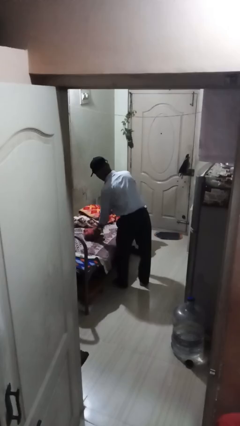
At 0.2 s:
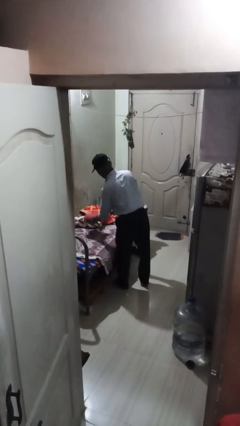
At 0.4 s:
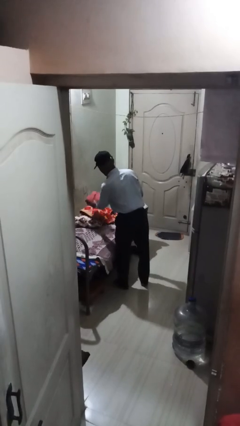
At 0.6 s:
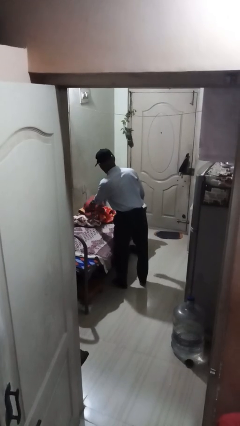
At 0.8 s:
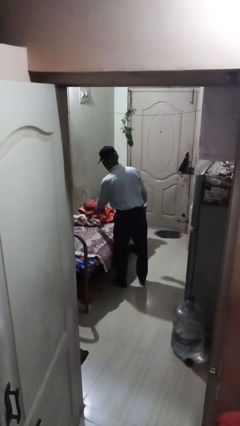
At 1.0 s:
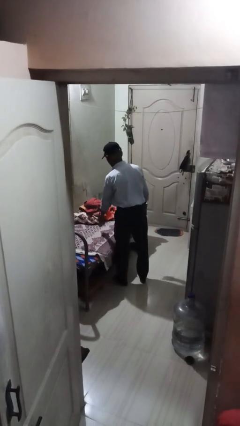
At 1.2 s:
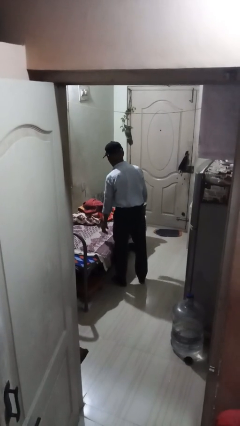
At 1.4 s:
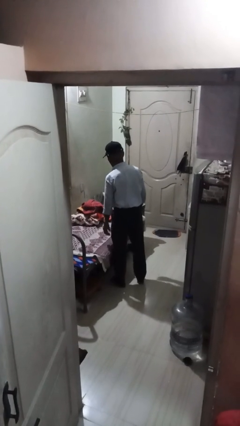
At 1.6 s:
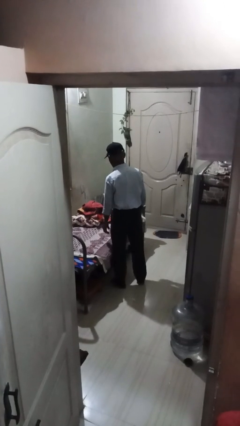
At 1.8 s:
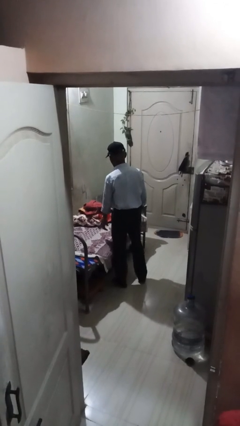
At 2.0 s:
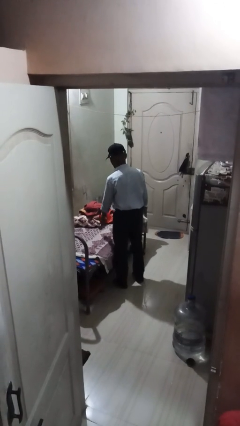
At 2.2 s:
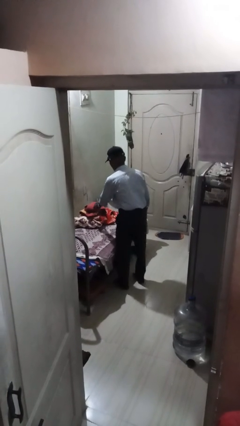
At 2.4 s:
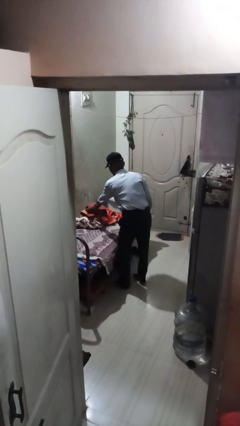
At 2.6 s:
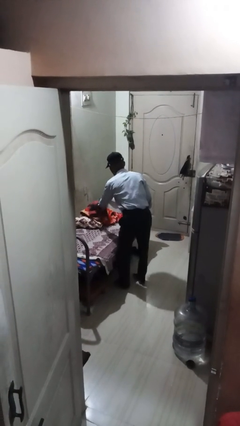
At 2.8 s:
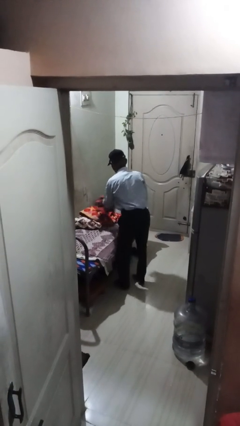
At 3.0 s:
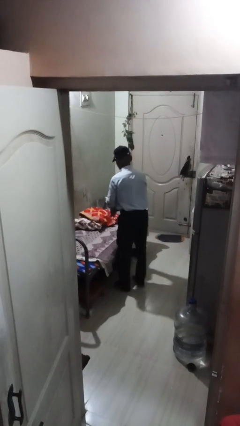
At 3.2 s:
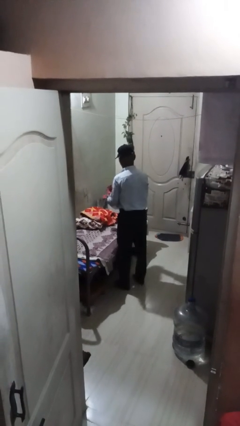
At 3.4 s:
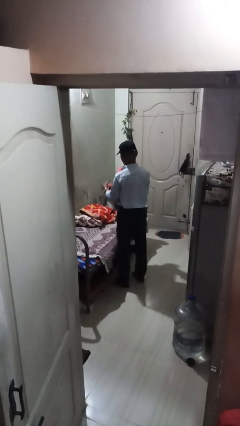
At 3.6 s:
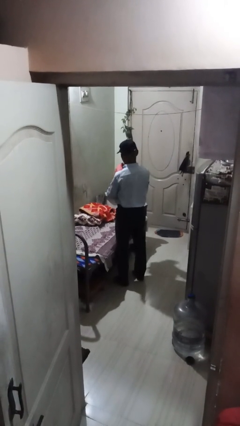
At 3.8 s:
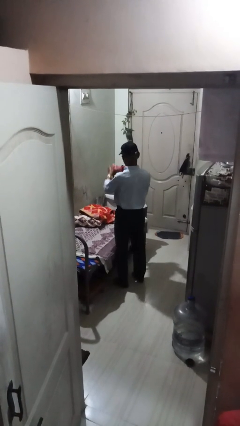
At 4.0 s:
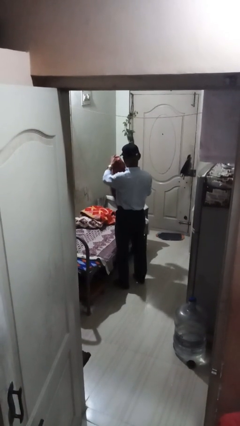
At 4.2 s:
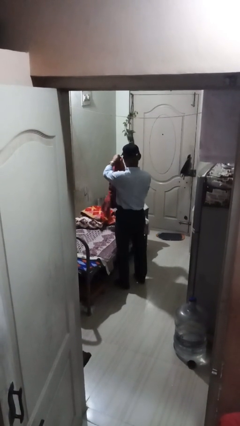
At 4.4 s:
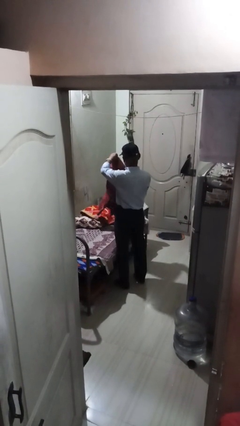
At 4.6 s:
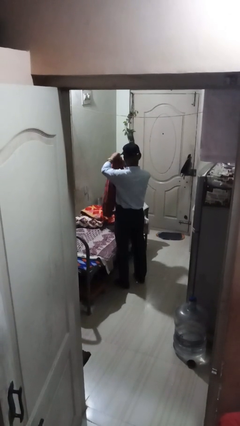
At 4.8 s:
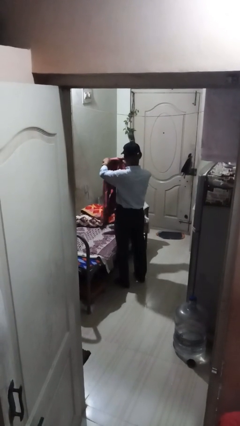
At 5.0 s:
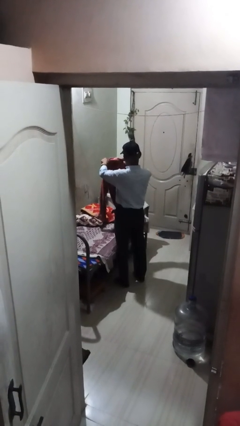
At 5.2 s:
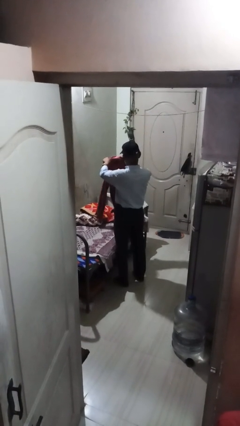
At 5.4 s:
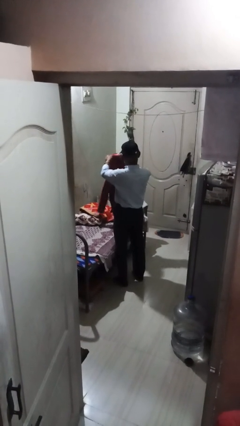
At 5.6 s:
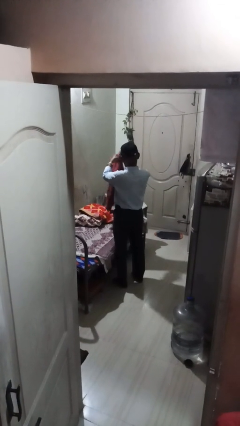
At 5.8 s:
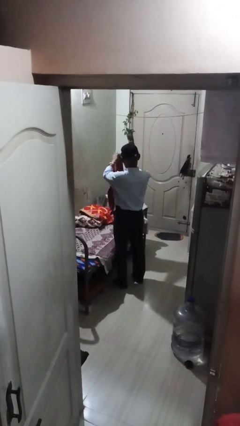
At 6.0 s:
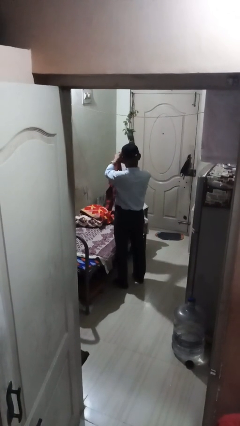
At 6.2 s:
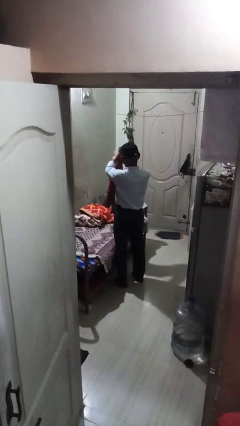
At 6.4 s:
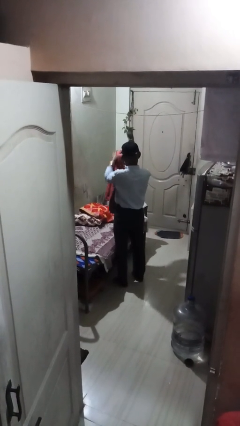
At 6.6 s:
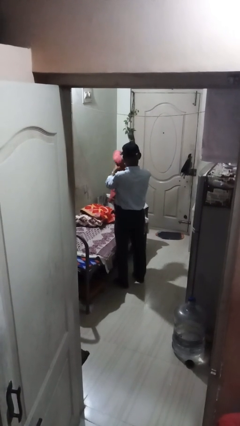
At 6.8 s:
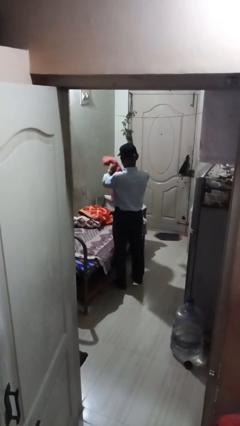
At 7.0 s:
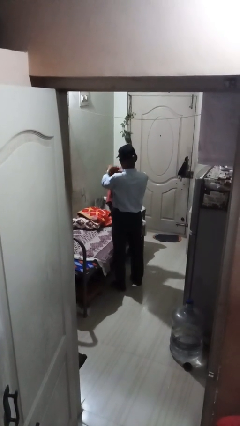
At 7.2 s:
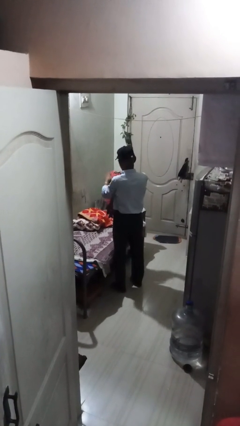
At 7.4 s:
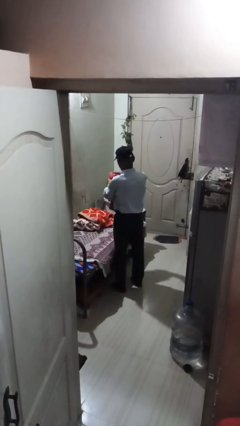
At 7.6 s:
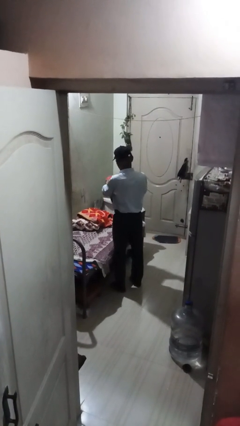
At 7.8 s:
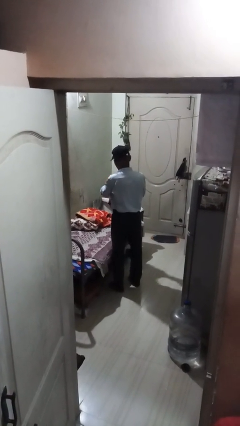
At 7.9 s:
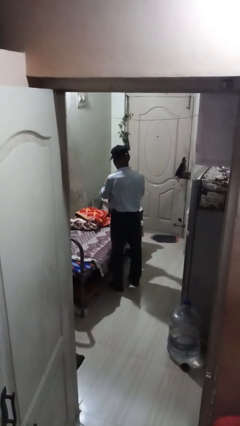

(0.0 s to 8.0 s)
person folds shirt

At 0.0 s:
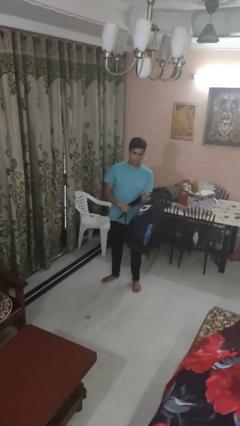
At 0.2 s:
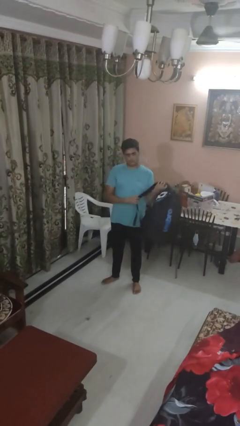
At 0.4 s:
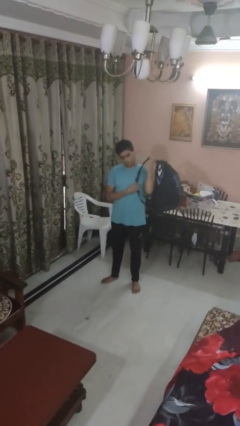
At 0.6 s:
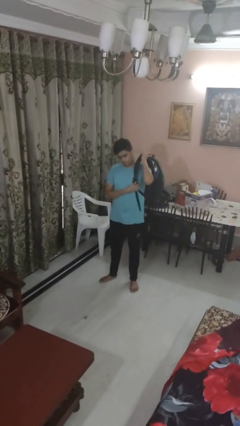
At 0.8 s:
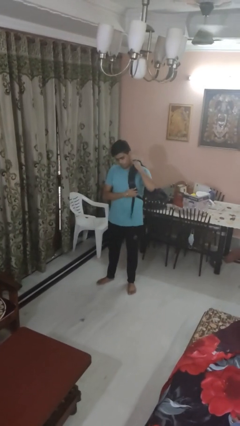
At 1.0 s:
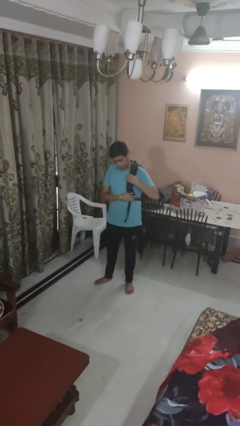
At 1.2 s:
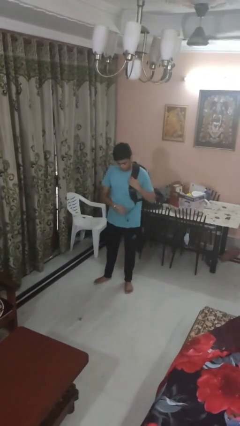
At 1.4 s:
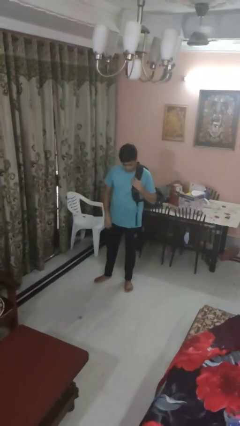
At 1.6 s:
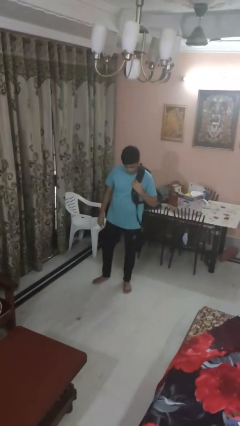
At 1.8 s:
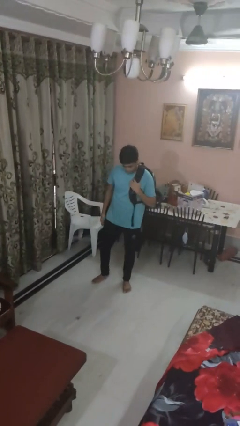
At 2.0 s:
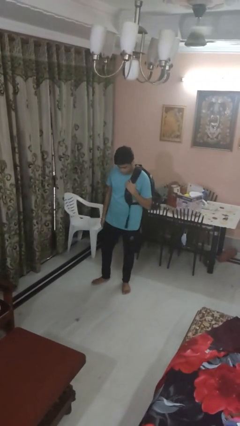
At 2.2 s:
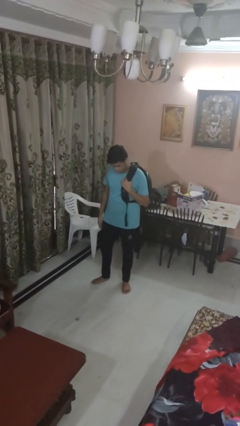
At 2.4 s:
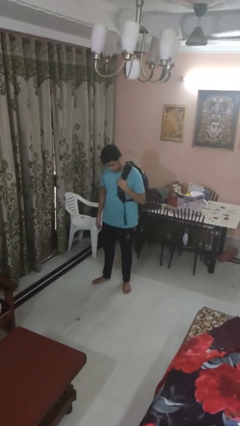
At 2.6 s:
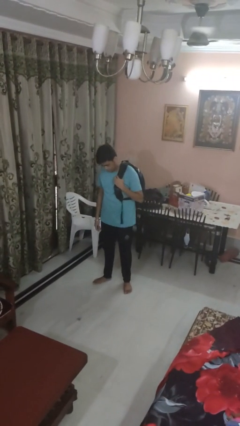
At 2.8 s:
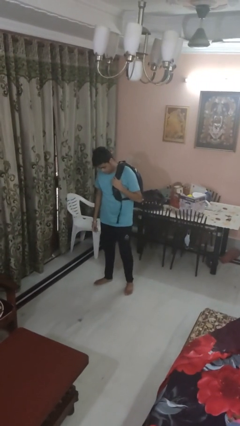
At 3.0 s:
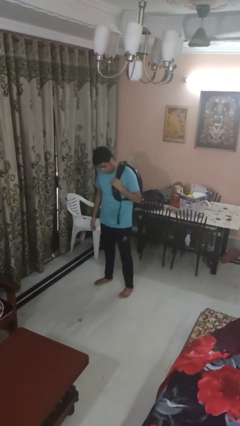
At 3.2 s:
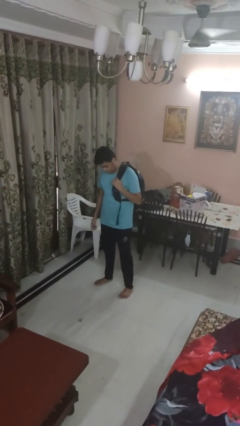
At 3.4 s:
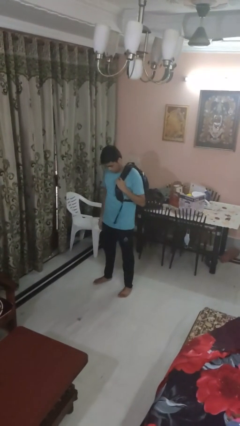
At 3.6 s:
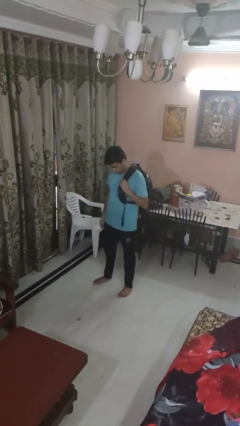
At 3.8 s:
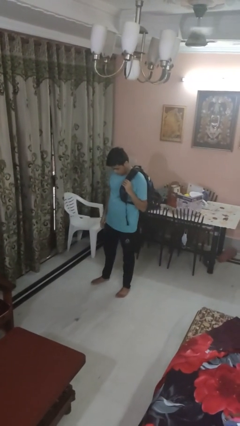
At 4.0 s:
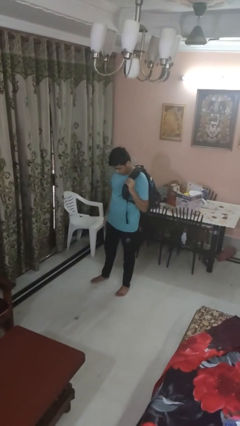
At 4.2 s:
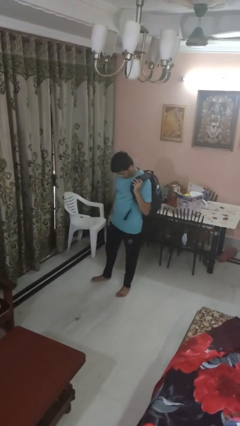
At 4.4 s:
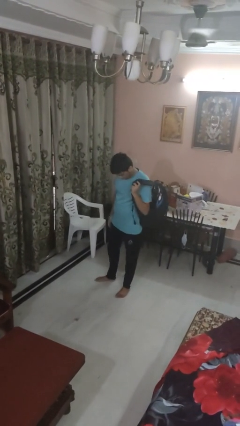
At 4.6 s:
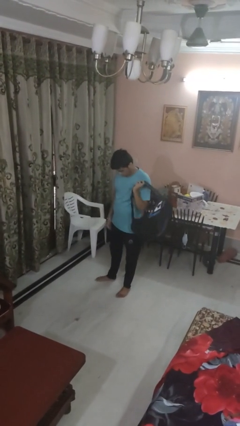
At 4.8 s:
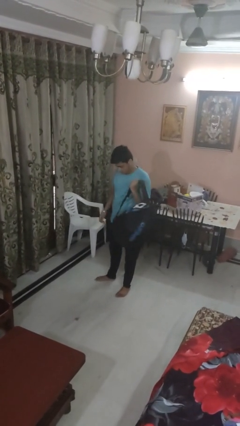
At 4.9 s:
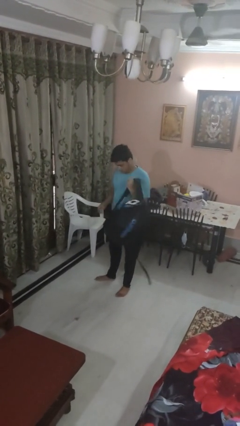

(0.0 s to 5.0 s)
person puts on backpack

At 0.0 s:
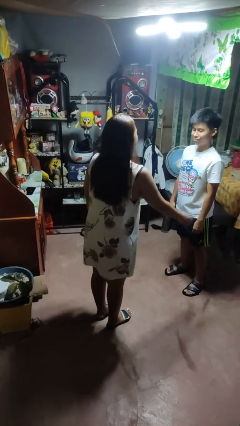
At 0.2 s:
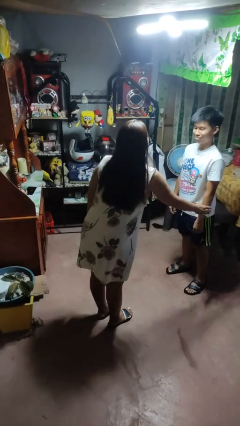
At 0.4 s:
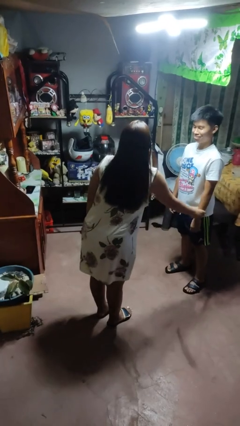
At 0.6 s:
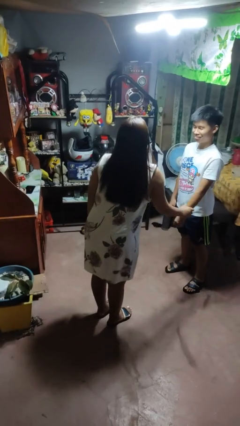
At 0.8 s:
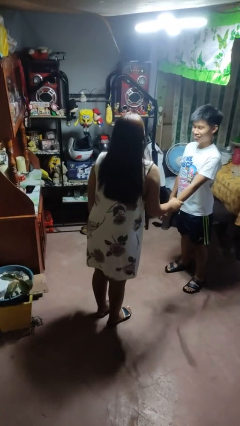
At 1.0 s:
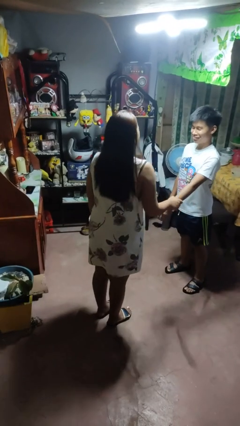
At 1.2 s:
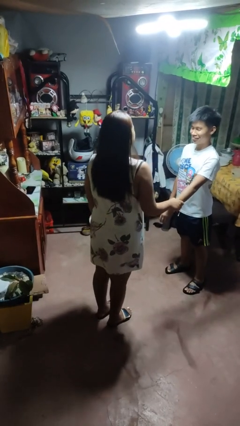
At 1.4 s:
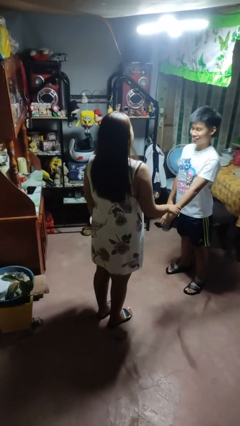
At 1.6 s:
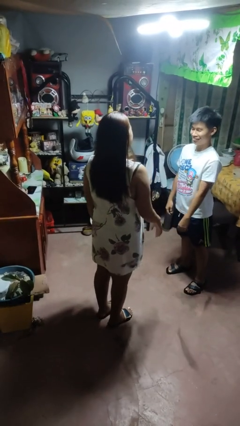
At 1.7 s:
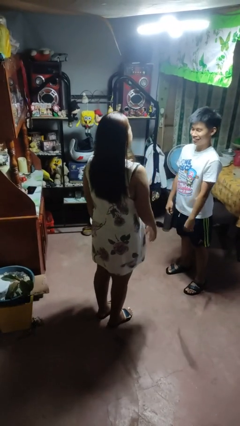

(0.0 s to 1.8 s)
person grabs person by forearm

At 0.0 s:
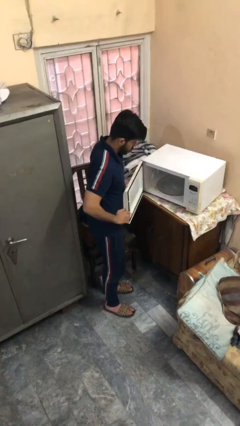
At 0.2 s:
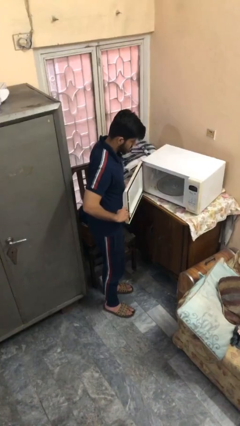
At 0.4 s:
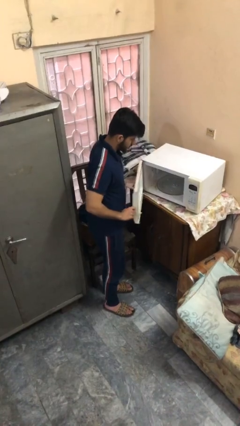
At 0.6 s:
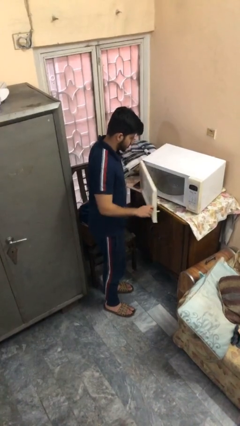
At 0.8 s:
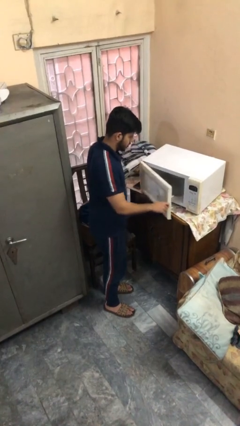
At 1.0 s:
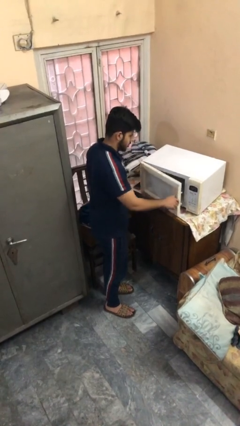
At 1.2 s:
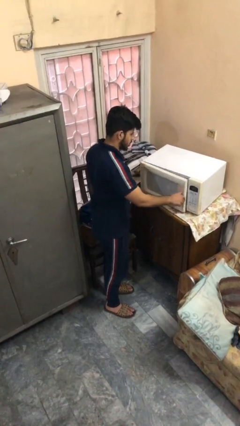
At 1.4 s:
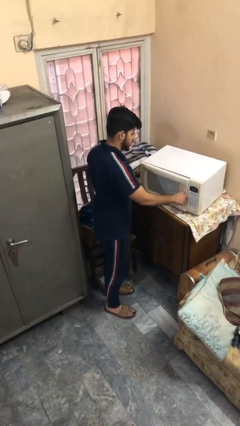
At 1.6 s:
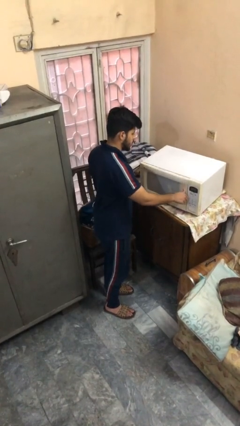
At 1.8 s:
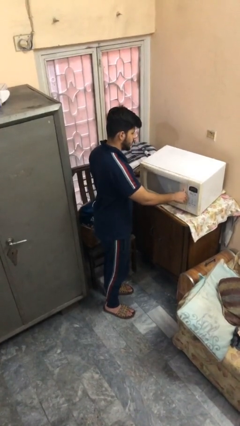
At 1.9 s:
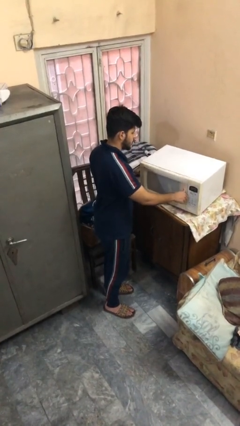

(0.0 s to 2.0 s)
person closes microwave

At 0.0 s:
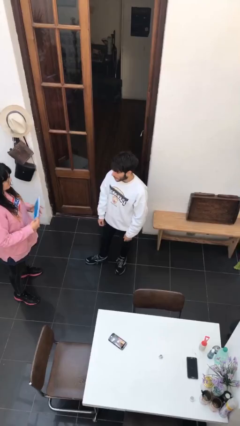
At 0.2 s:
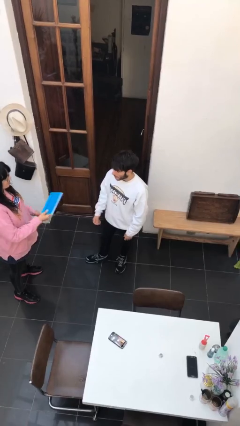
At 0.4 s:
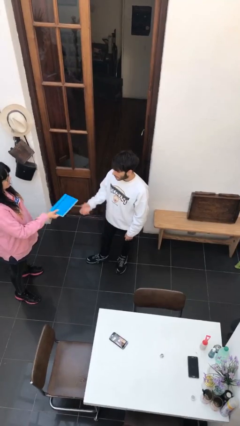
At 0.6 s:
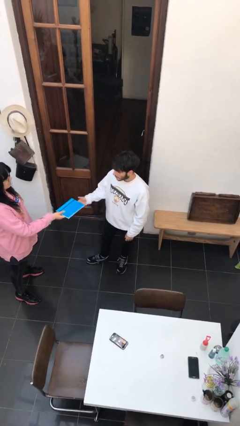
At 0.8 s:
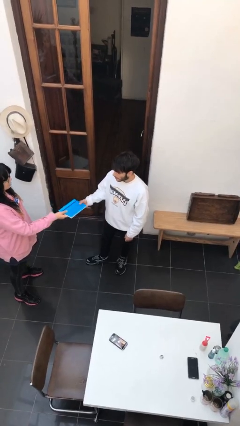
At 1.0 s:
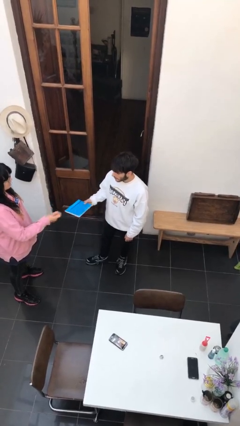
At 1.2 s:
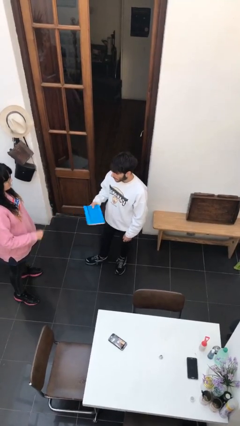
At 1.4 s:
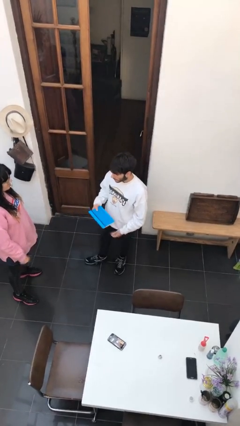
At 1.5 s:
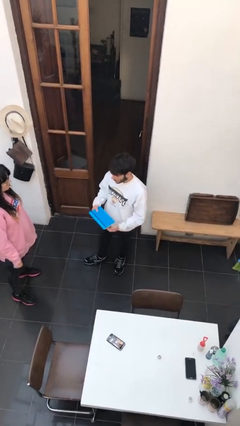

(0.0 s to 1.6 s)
person transfers object to person
